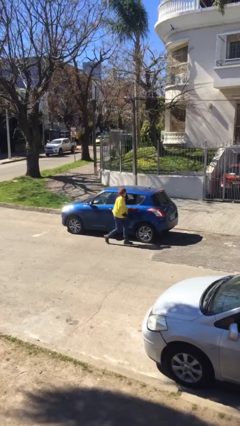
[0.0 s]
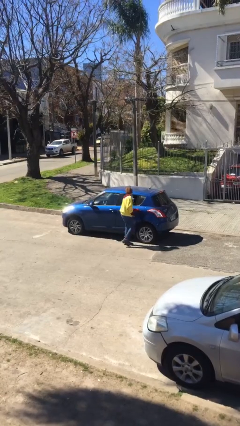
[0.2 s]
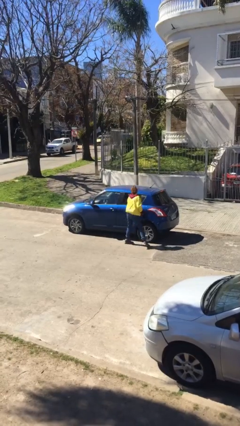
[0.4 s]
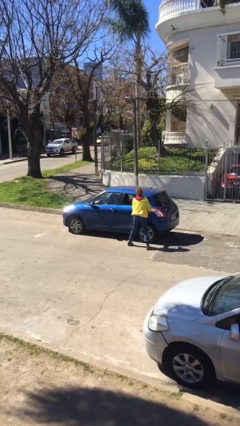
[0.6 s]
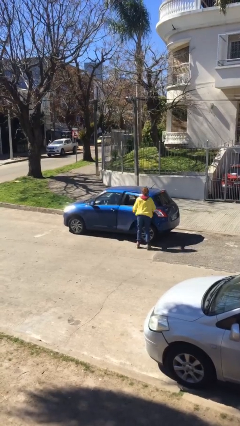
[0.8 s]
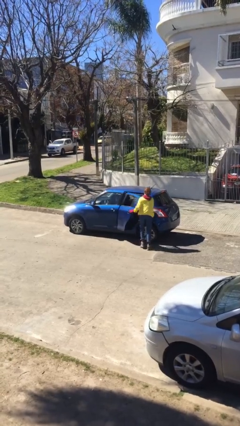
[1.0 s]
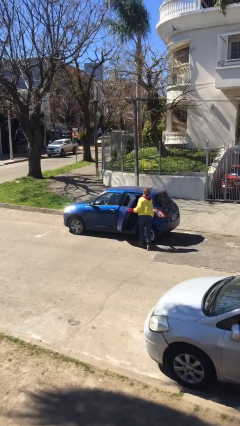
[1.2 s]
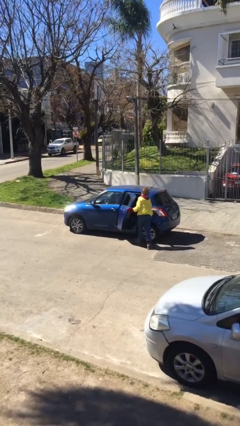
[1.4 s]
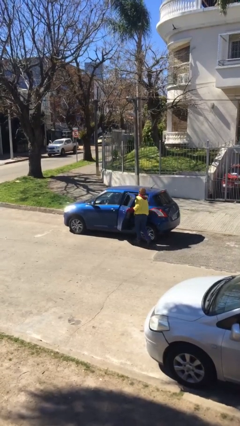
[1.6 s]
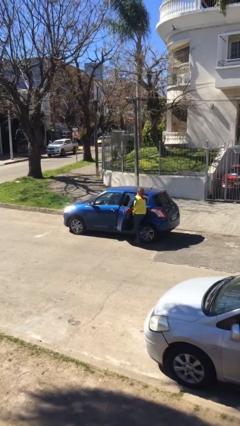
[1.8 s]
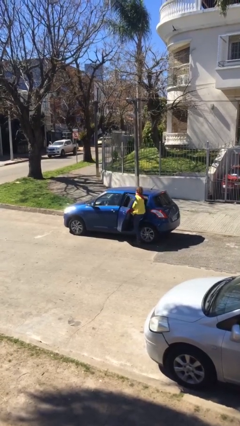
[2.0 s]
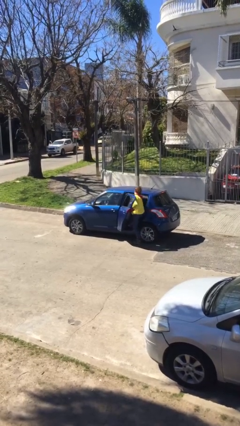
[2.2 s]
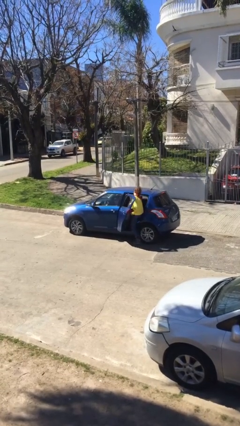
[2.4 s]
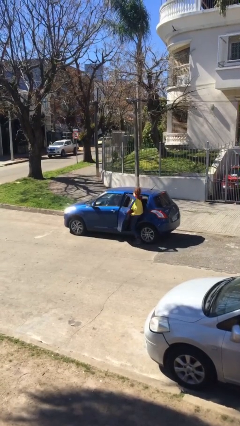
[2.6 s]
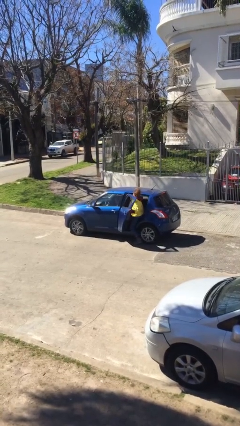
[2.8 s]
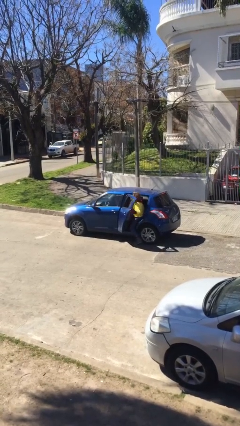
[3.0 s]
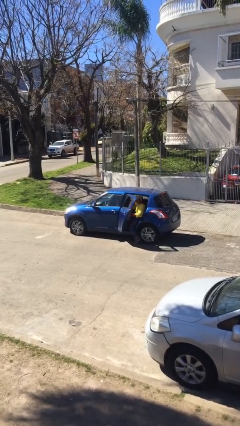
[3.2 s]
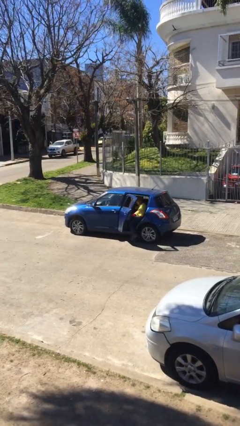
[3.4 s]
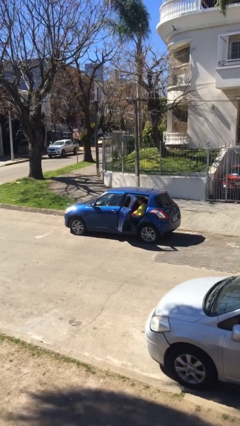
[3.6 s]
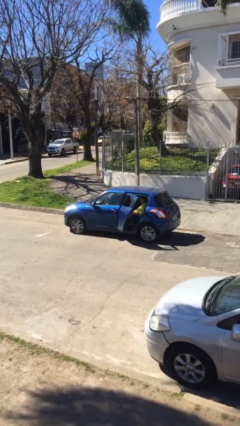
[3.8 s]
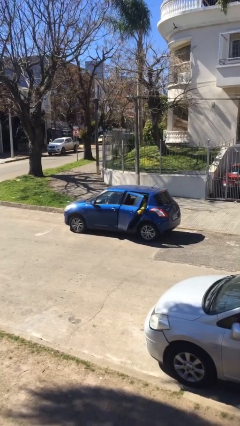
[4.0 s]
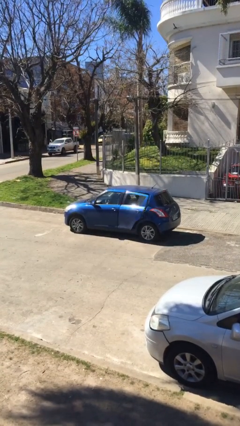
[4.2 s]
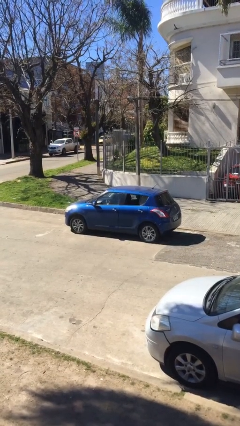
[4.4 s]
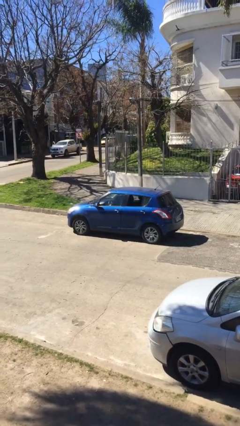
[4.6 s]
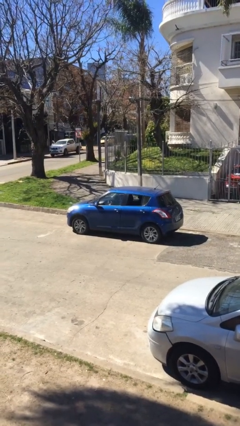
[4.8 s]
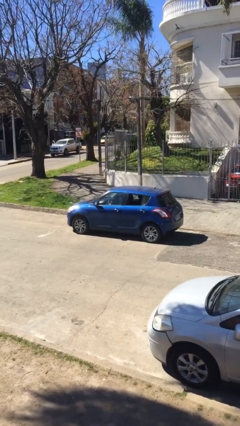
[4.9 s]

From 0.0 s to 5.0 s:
car picks up person

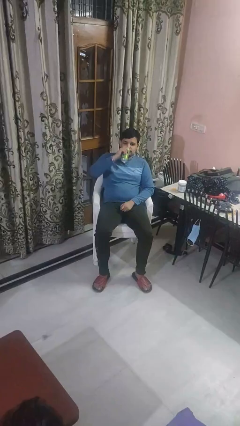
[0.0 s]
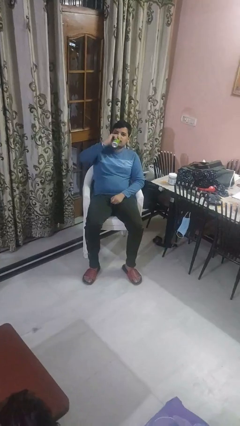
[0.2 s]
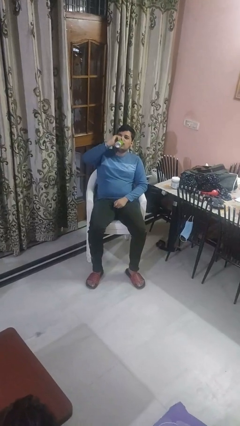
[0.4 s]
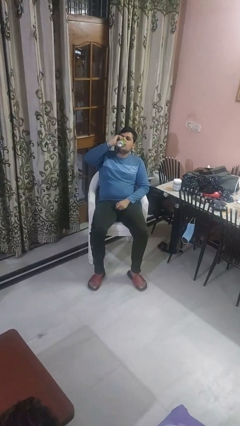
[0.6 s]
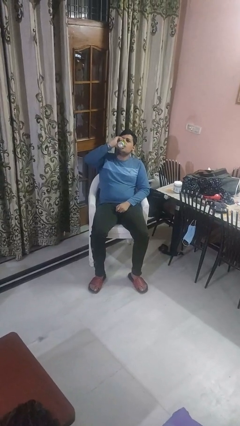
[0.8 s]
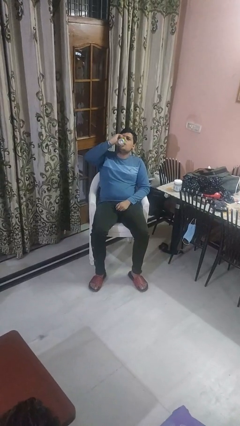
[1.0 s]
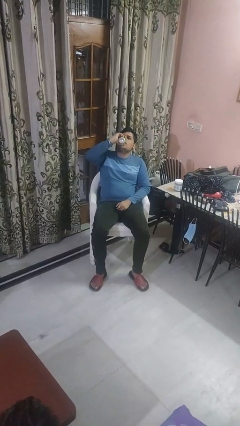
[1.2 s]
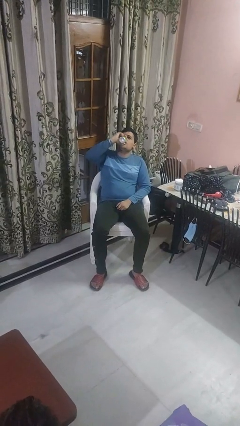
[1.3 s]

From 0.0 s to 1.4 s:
person drinks from beverage can

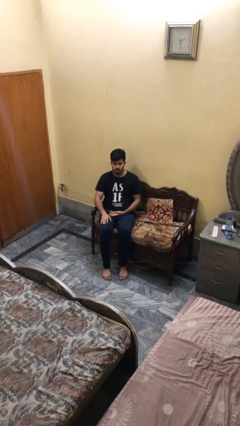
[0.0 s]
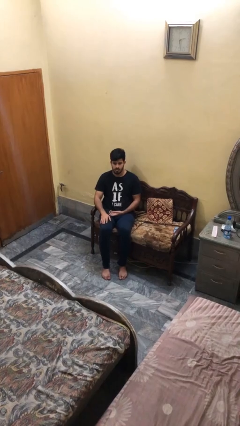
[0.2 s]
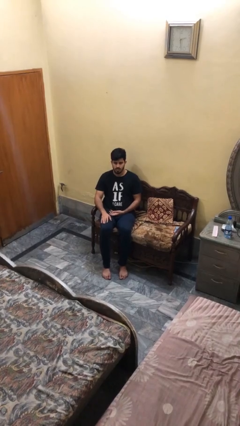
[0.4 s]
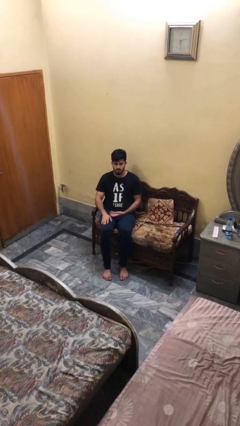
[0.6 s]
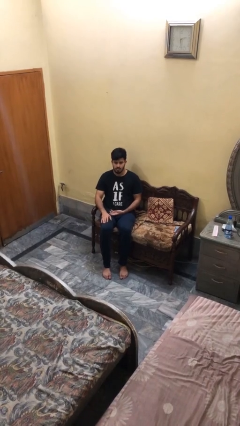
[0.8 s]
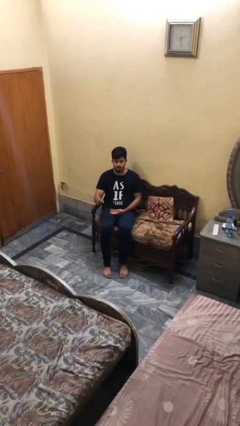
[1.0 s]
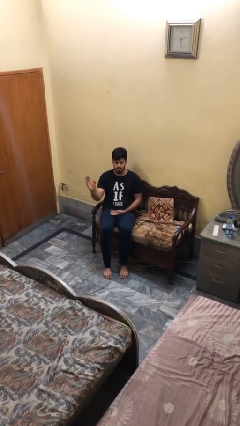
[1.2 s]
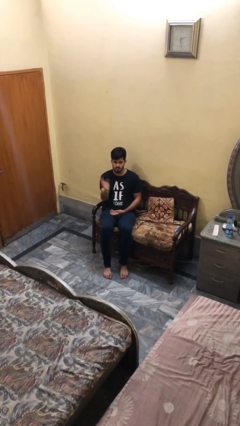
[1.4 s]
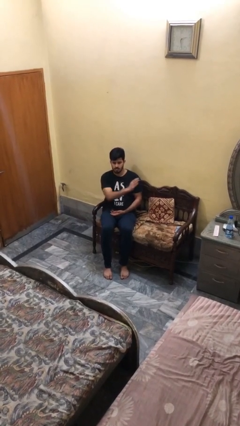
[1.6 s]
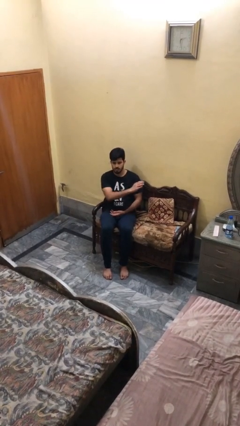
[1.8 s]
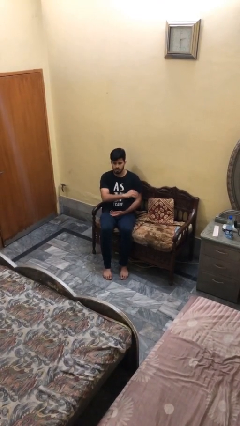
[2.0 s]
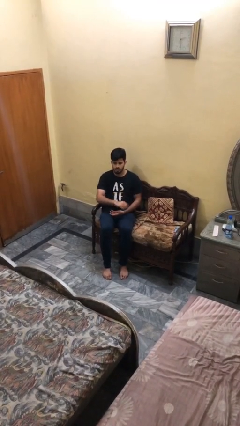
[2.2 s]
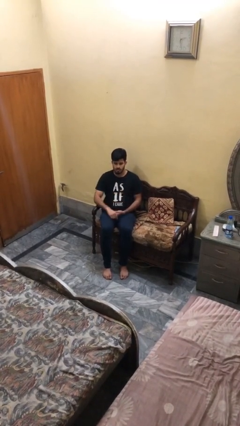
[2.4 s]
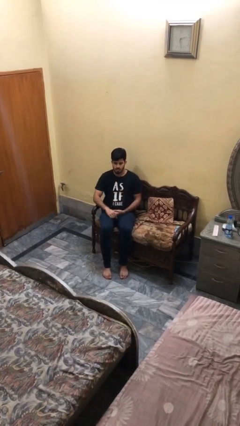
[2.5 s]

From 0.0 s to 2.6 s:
person gestures swipe left

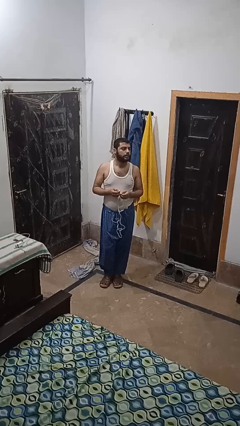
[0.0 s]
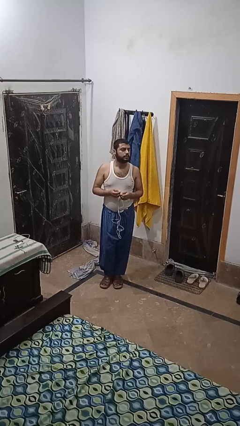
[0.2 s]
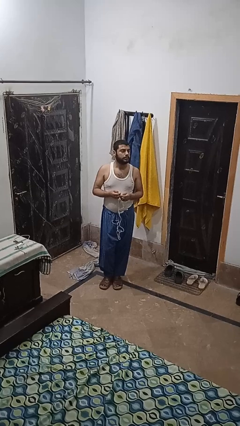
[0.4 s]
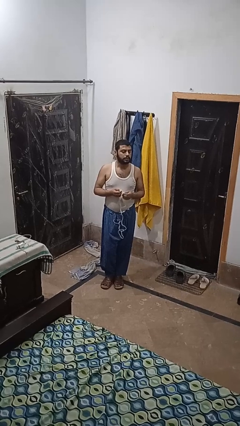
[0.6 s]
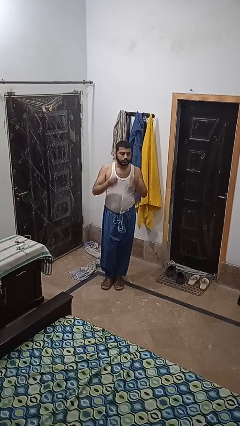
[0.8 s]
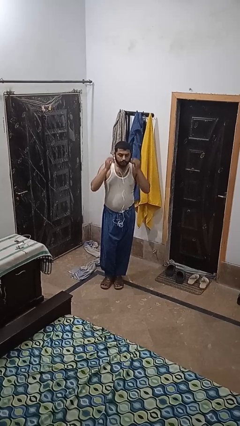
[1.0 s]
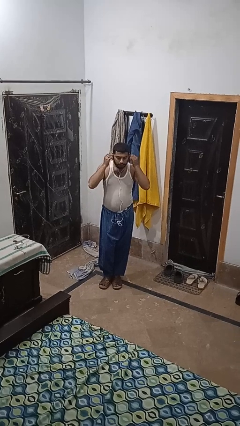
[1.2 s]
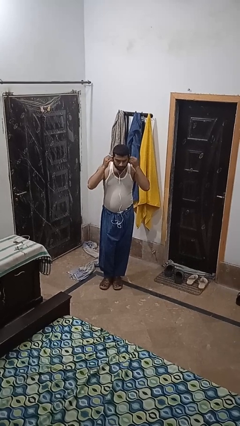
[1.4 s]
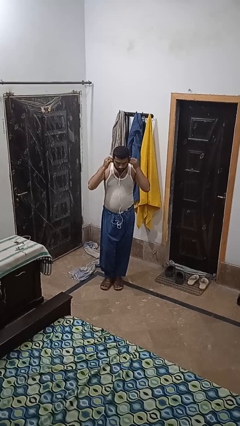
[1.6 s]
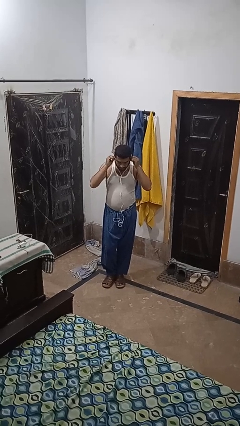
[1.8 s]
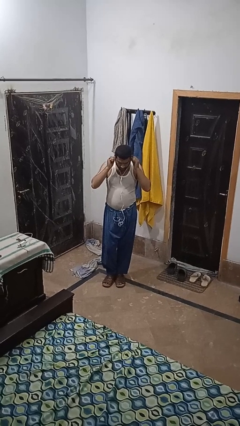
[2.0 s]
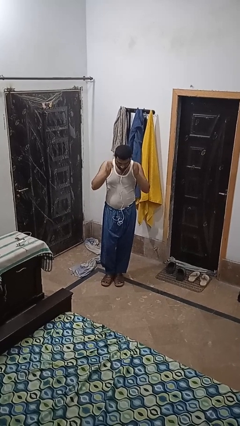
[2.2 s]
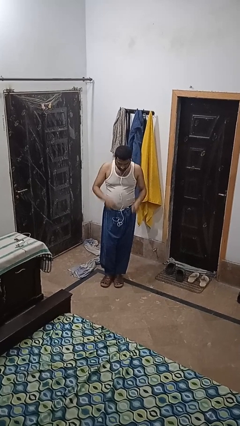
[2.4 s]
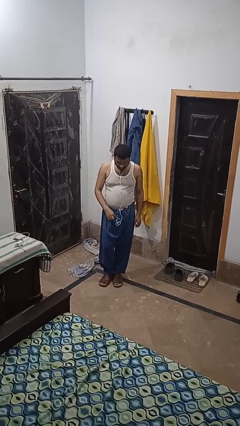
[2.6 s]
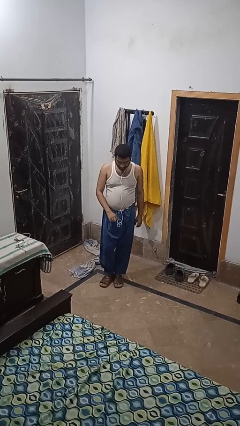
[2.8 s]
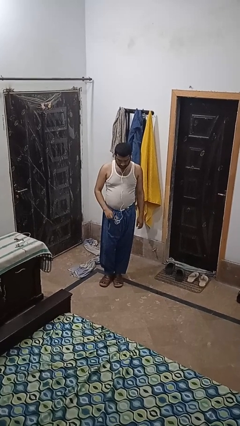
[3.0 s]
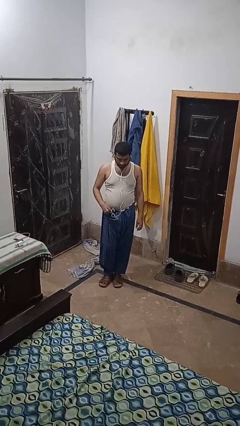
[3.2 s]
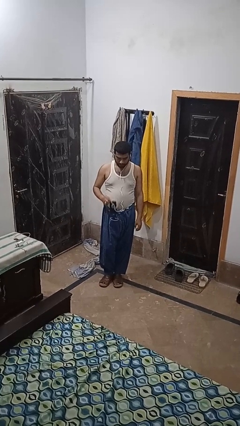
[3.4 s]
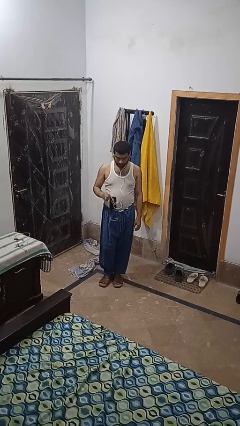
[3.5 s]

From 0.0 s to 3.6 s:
person puts on headphones

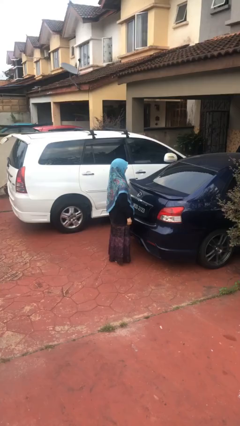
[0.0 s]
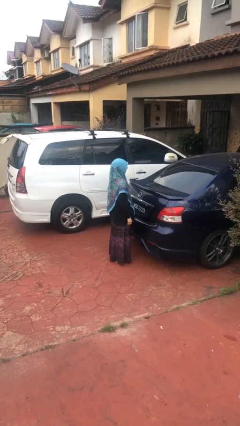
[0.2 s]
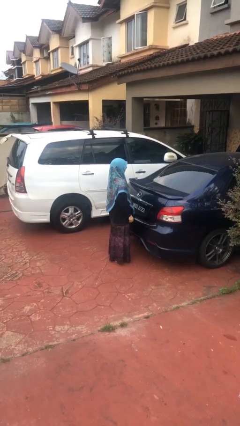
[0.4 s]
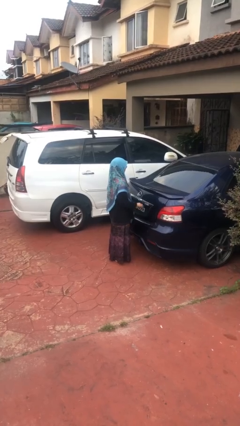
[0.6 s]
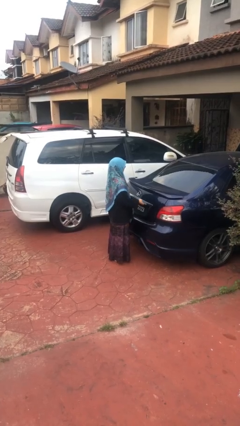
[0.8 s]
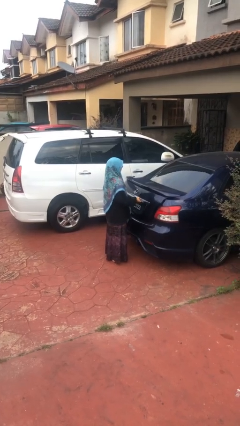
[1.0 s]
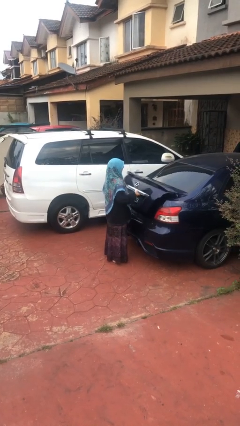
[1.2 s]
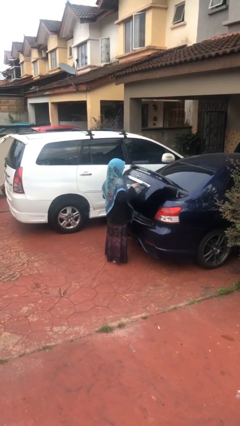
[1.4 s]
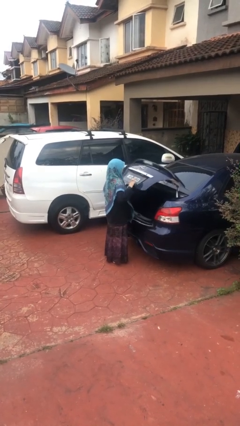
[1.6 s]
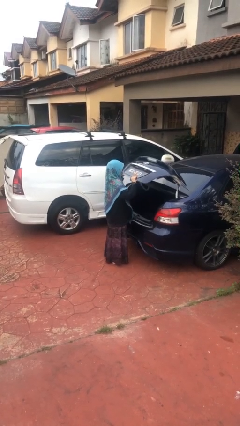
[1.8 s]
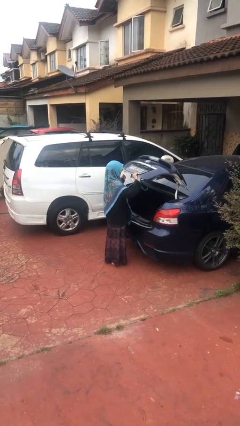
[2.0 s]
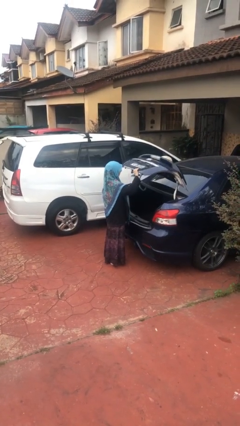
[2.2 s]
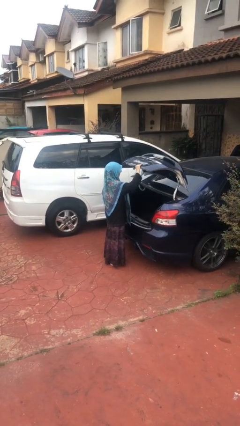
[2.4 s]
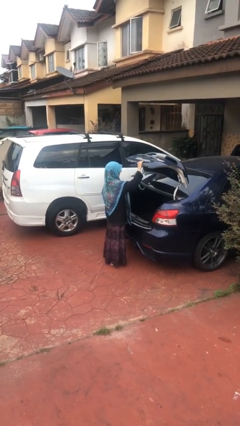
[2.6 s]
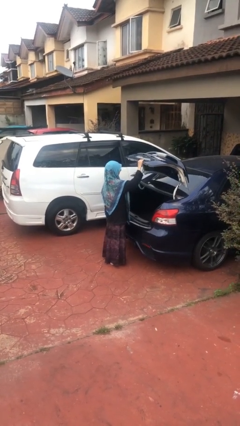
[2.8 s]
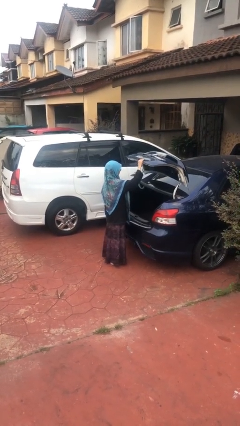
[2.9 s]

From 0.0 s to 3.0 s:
person opens car trunk

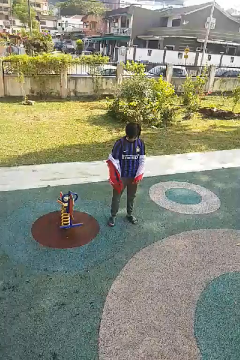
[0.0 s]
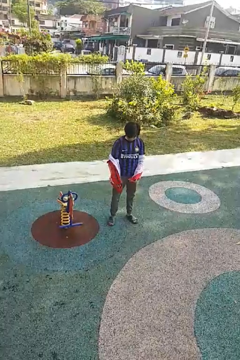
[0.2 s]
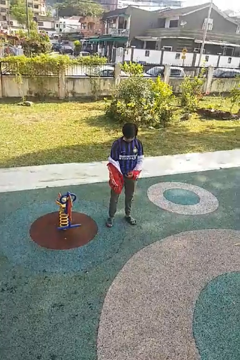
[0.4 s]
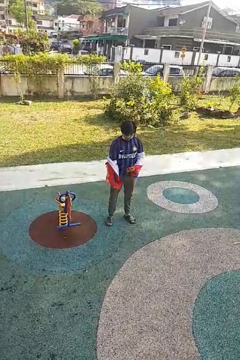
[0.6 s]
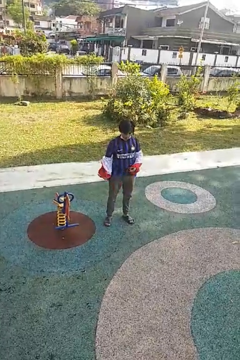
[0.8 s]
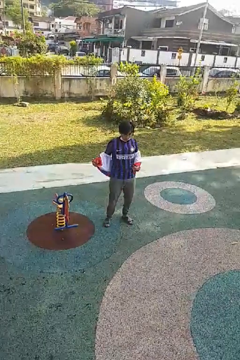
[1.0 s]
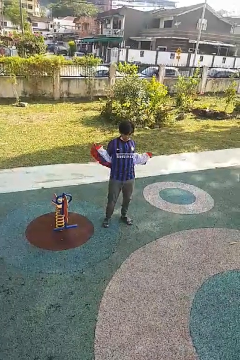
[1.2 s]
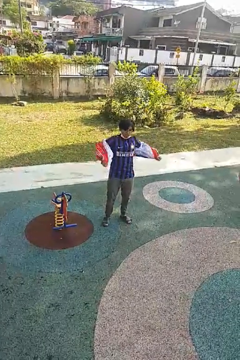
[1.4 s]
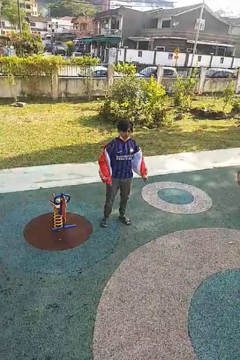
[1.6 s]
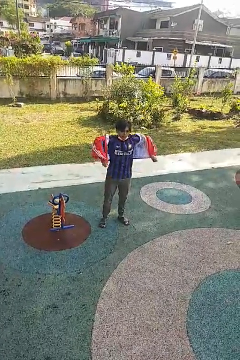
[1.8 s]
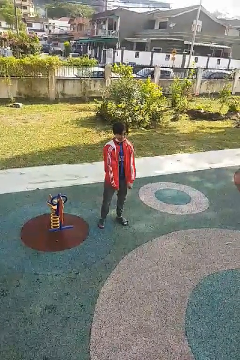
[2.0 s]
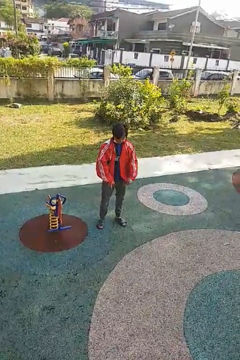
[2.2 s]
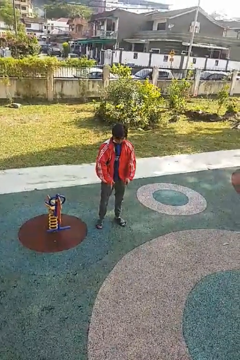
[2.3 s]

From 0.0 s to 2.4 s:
person puts on jacket
